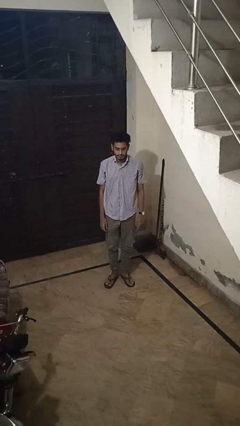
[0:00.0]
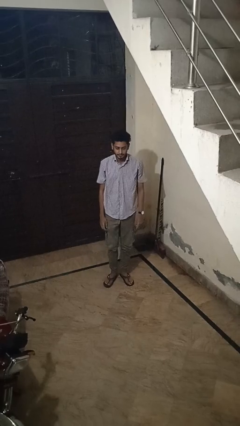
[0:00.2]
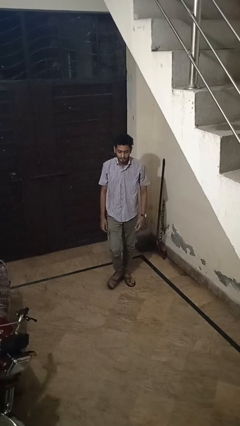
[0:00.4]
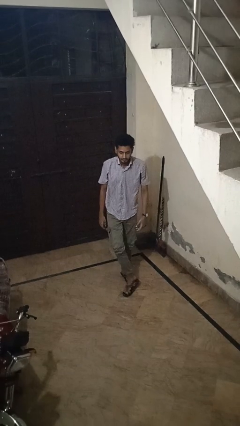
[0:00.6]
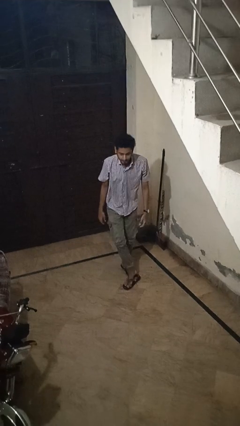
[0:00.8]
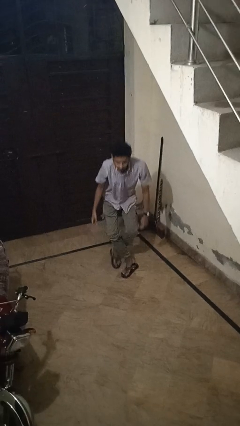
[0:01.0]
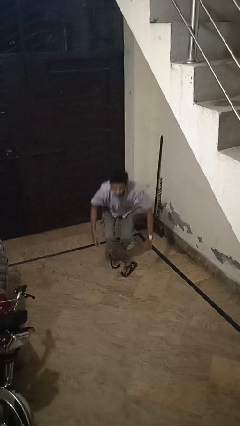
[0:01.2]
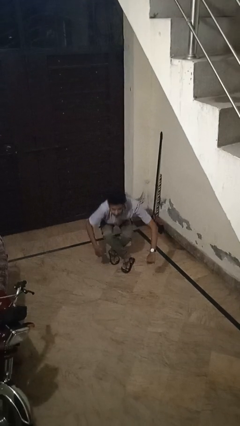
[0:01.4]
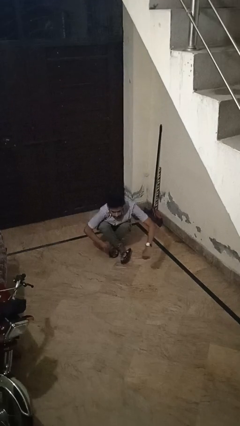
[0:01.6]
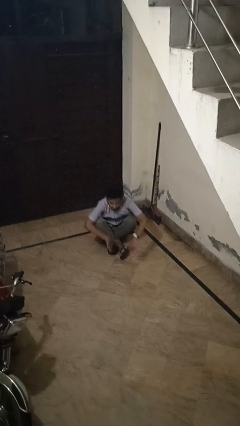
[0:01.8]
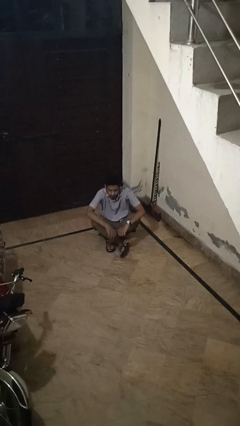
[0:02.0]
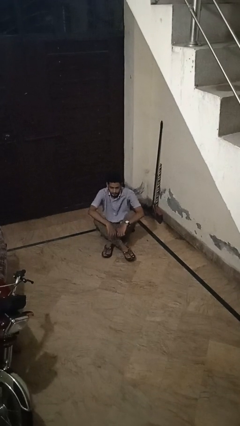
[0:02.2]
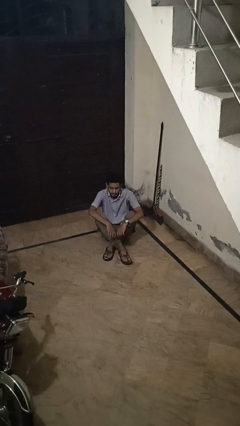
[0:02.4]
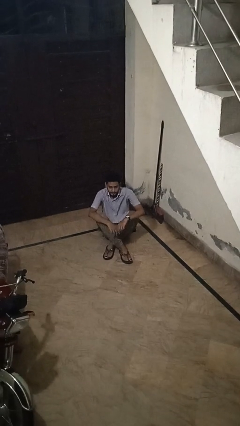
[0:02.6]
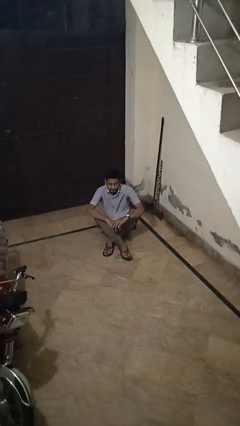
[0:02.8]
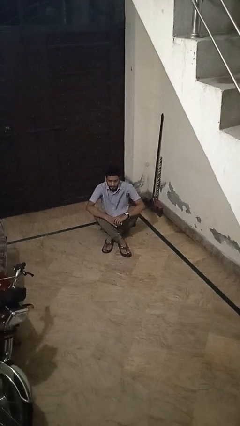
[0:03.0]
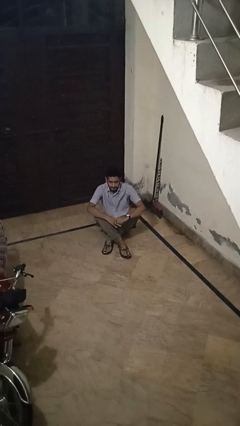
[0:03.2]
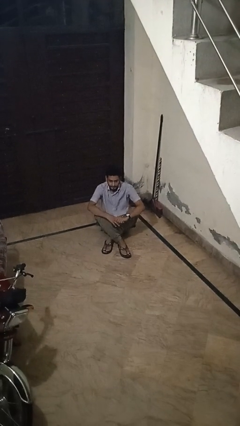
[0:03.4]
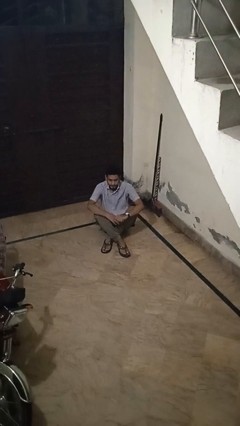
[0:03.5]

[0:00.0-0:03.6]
person sits crisscross

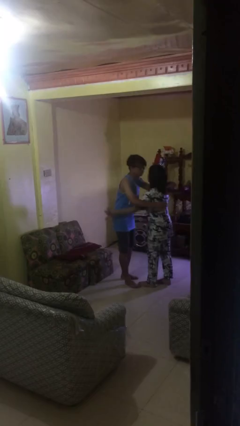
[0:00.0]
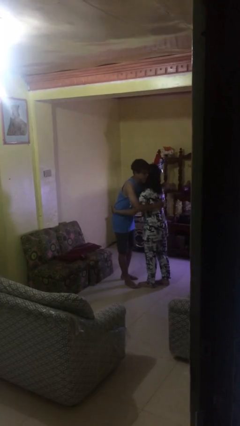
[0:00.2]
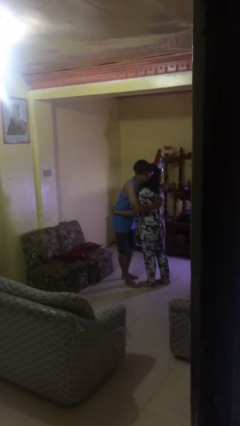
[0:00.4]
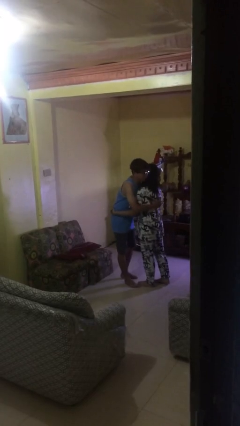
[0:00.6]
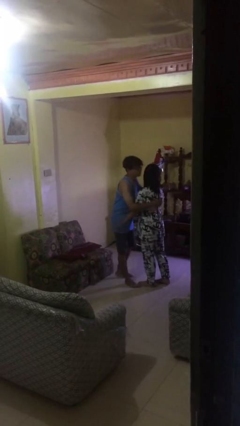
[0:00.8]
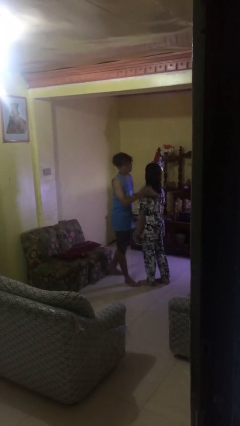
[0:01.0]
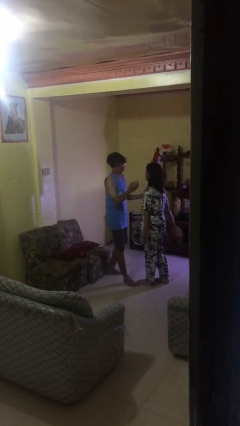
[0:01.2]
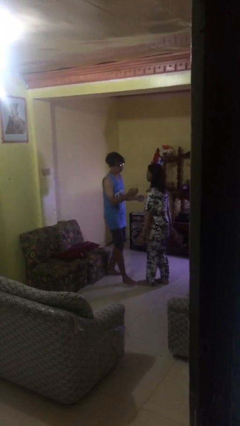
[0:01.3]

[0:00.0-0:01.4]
person embraces person

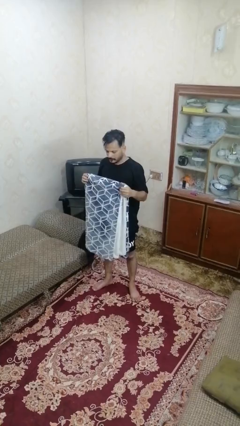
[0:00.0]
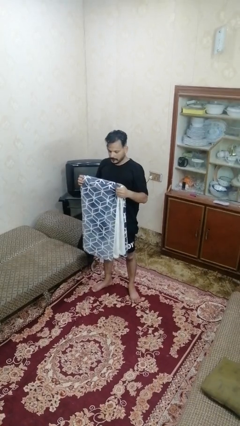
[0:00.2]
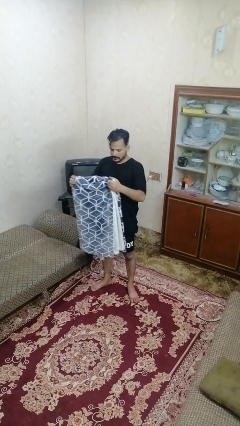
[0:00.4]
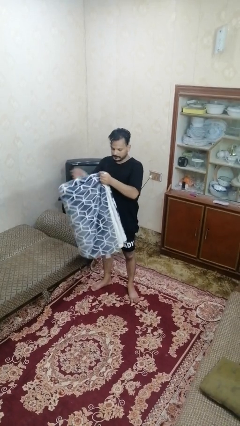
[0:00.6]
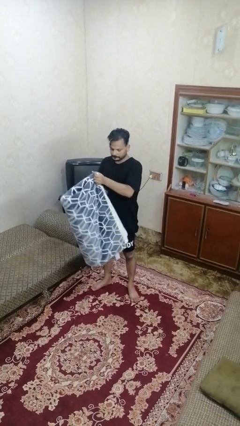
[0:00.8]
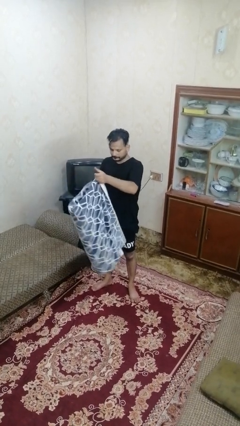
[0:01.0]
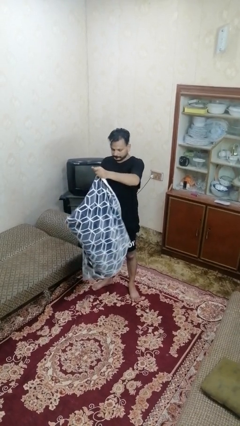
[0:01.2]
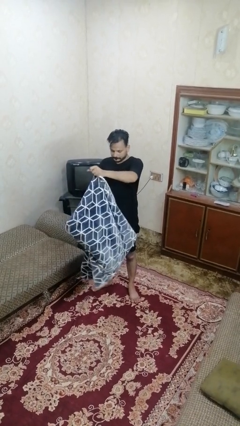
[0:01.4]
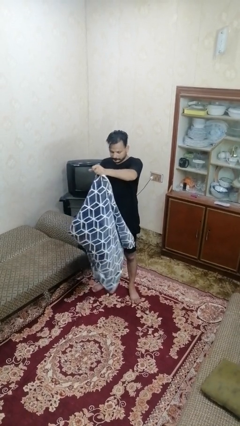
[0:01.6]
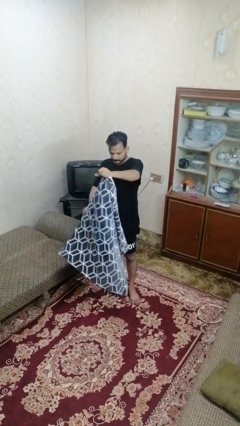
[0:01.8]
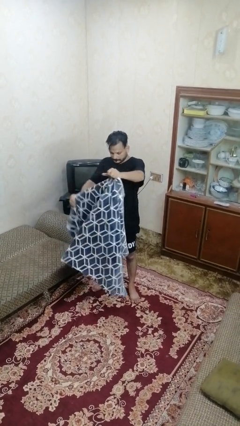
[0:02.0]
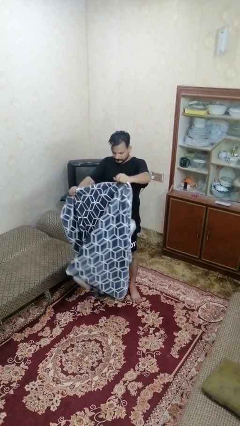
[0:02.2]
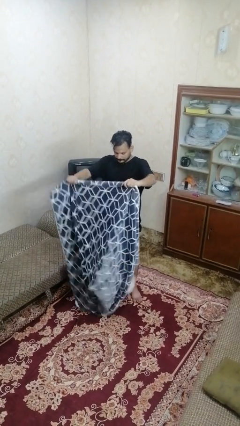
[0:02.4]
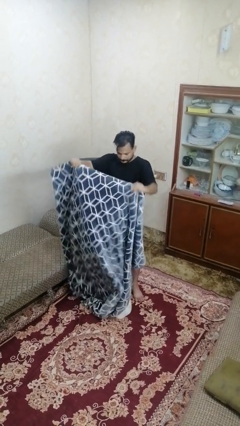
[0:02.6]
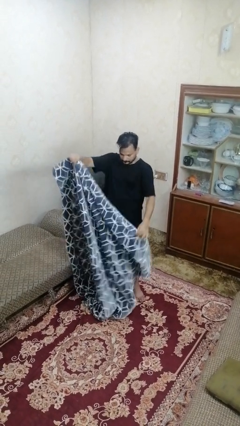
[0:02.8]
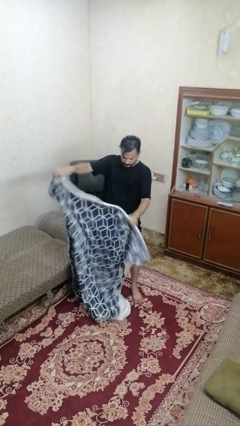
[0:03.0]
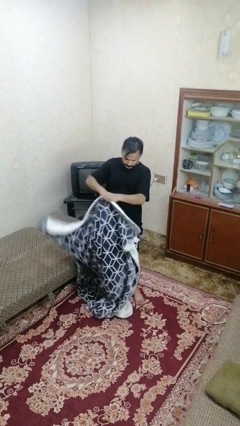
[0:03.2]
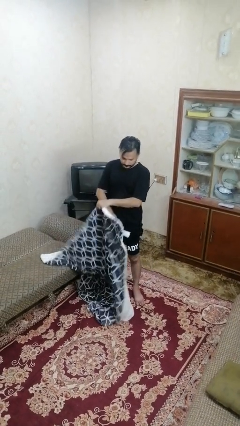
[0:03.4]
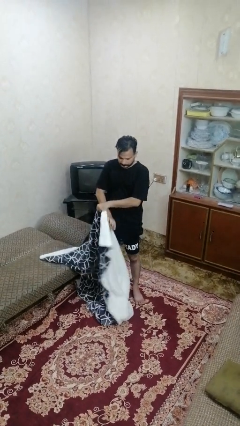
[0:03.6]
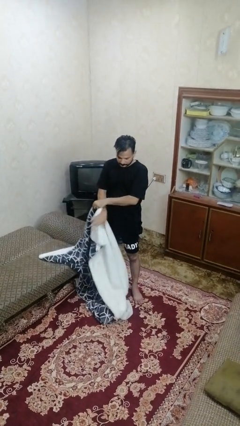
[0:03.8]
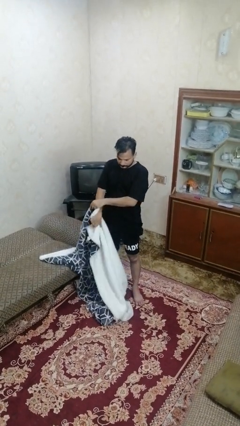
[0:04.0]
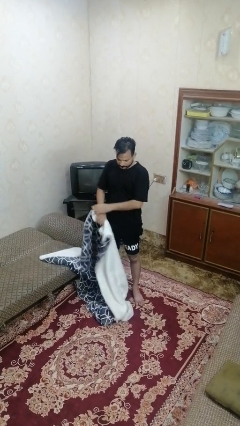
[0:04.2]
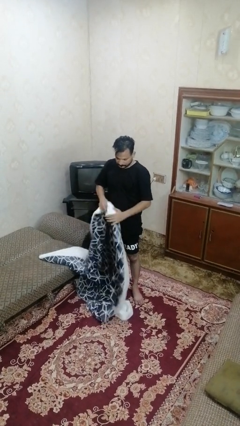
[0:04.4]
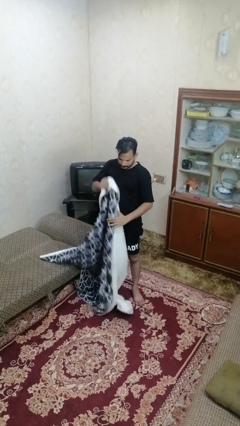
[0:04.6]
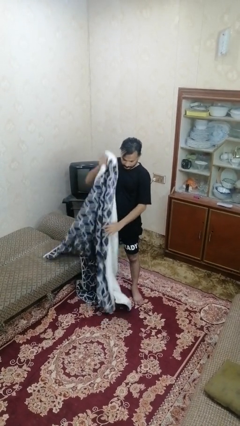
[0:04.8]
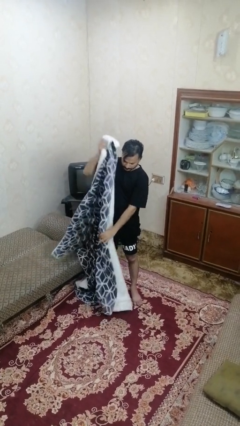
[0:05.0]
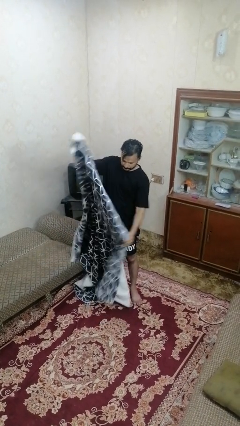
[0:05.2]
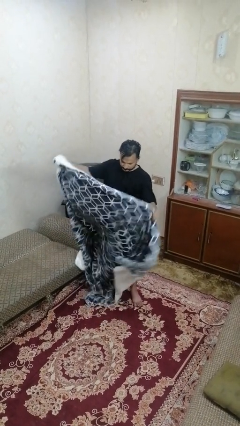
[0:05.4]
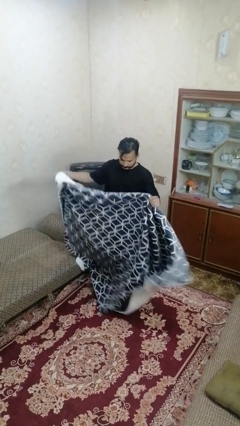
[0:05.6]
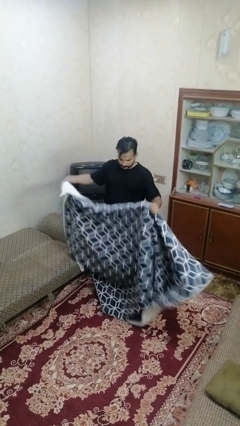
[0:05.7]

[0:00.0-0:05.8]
person unfolds blanket

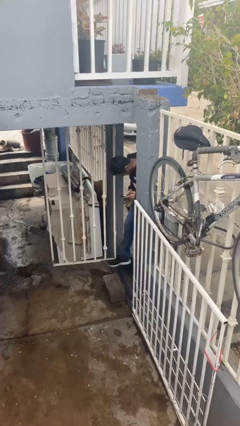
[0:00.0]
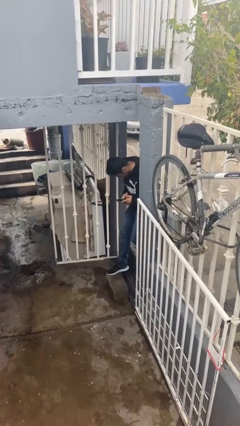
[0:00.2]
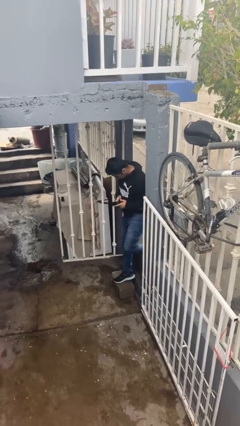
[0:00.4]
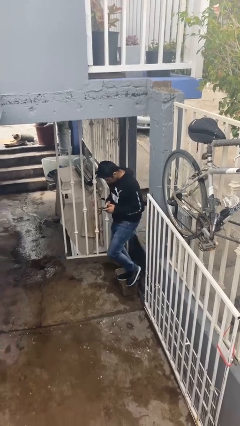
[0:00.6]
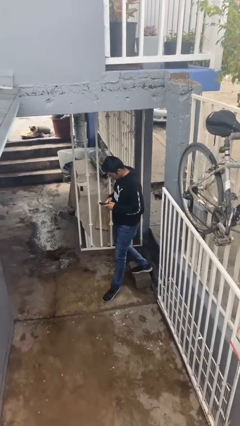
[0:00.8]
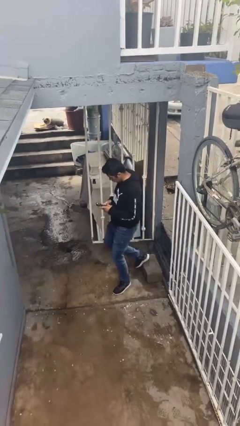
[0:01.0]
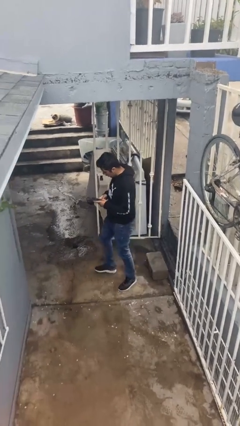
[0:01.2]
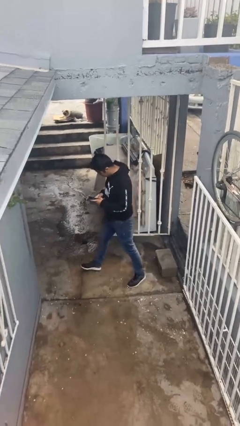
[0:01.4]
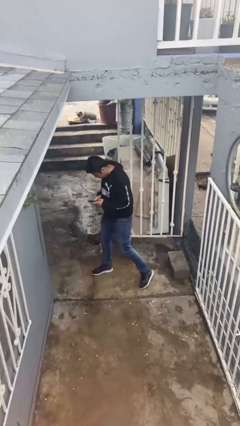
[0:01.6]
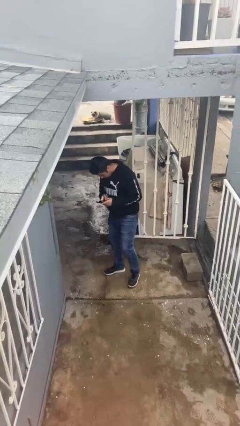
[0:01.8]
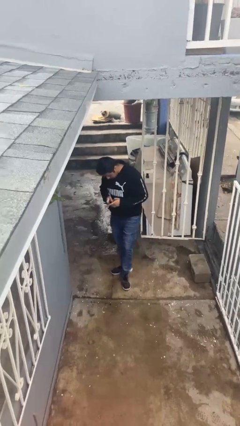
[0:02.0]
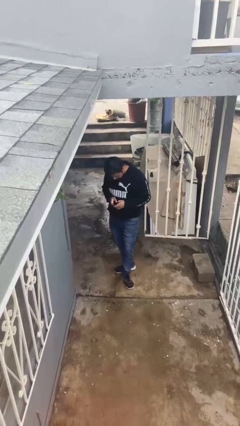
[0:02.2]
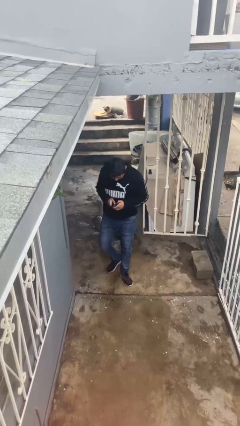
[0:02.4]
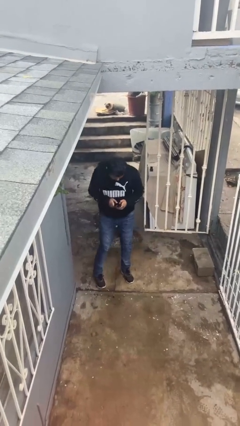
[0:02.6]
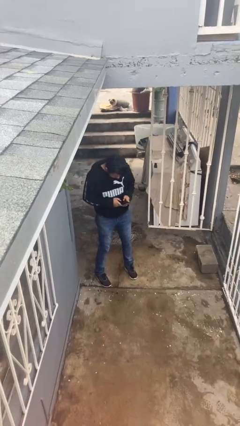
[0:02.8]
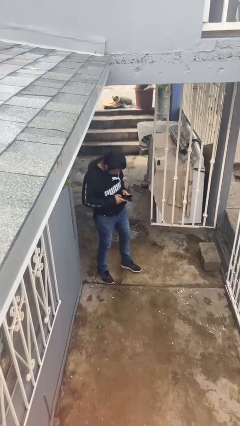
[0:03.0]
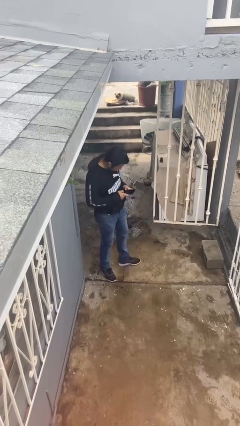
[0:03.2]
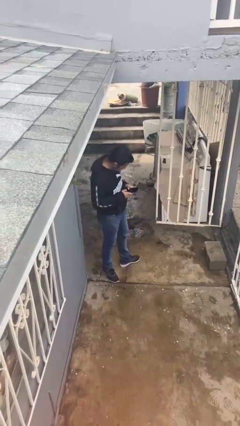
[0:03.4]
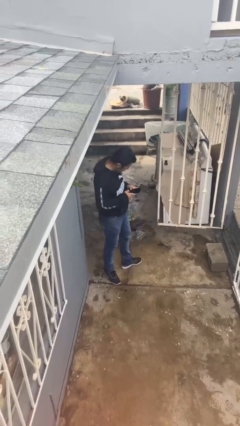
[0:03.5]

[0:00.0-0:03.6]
person enters scene through structure

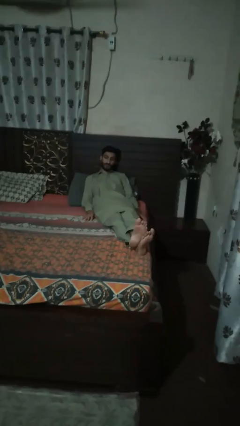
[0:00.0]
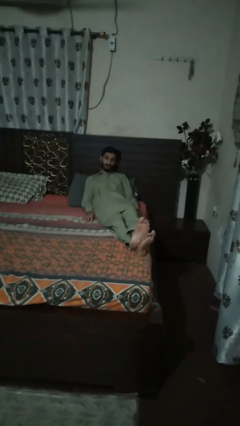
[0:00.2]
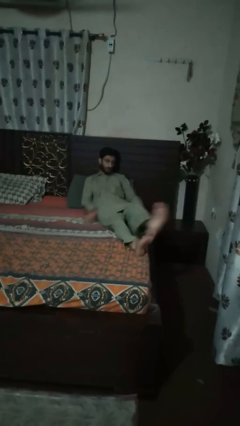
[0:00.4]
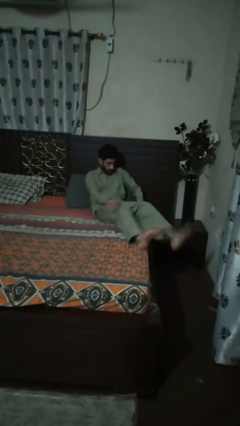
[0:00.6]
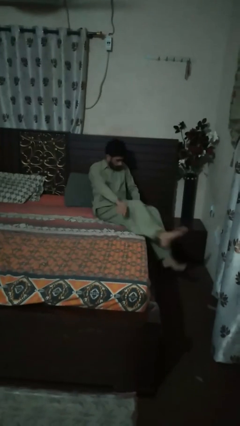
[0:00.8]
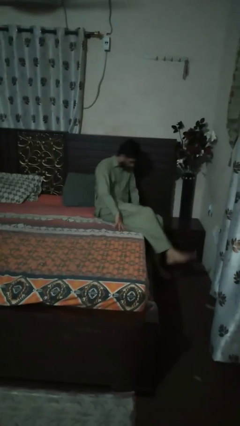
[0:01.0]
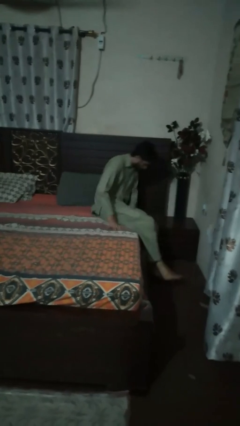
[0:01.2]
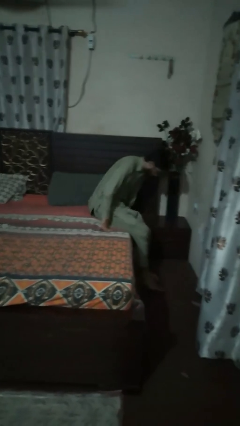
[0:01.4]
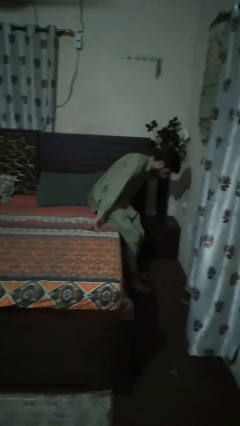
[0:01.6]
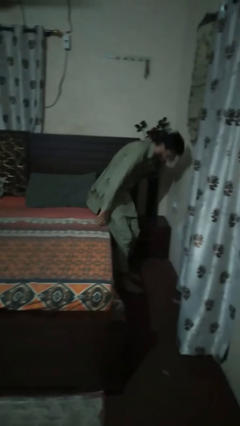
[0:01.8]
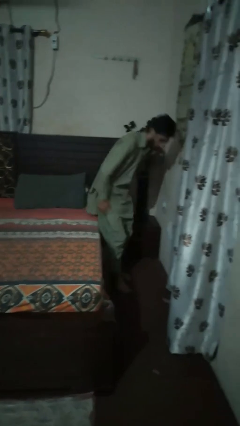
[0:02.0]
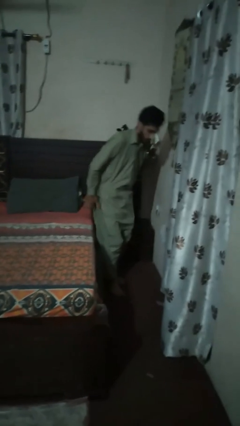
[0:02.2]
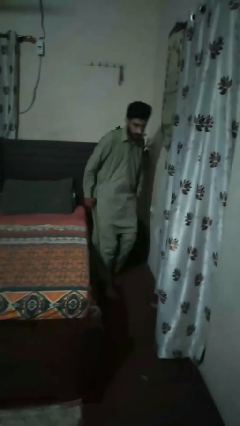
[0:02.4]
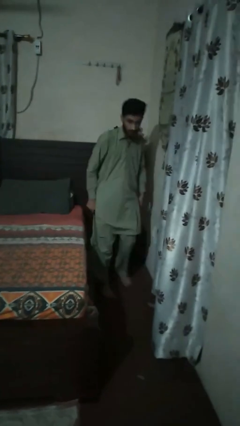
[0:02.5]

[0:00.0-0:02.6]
person stands up

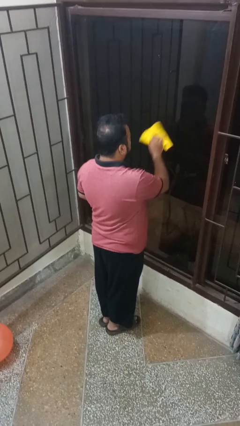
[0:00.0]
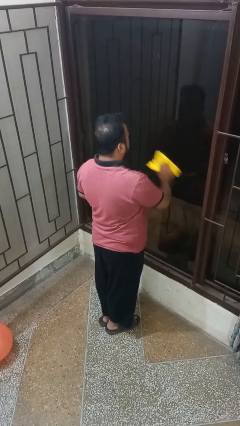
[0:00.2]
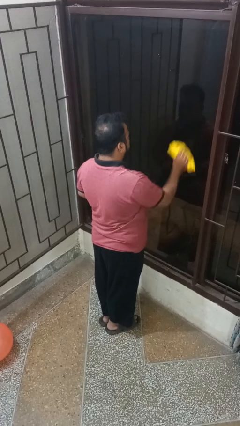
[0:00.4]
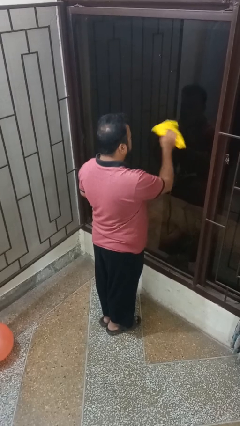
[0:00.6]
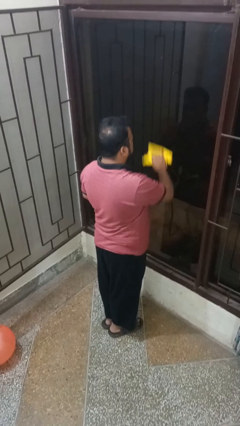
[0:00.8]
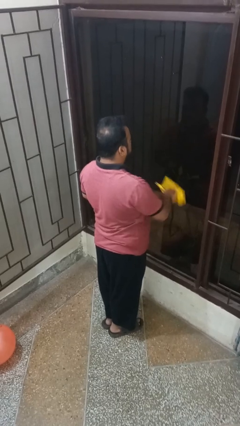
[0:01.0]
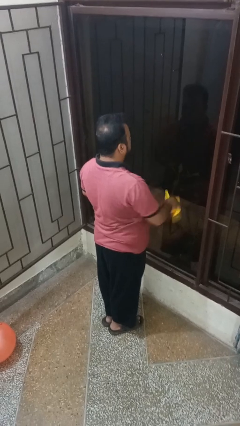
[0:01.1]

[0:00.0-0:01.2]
person washes window
